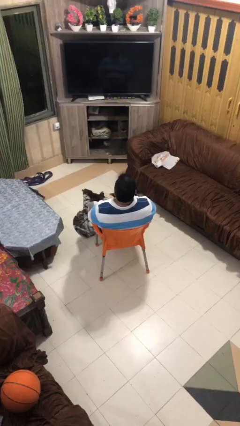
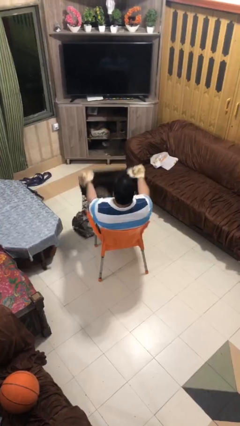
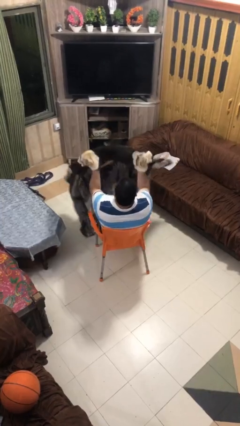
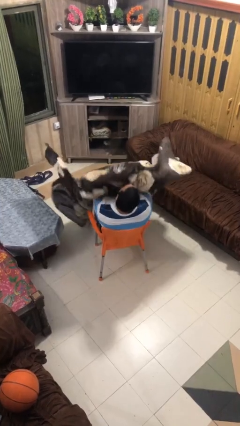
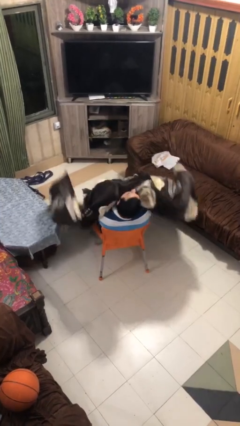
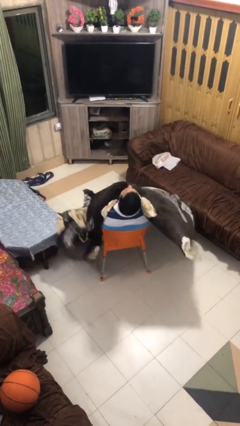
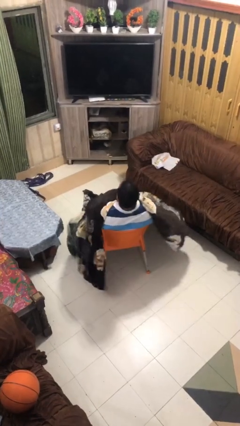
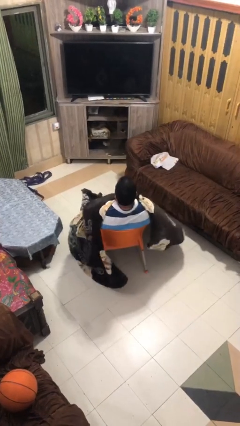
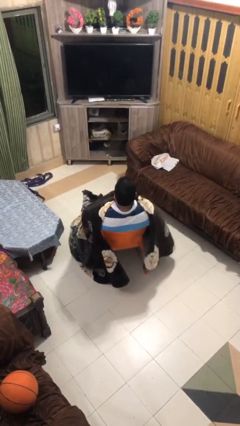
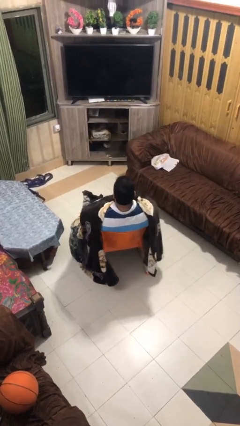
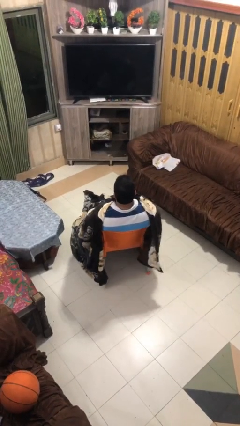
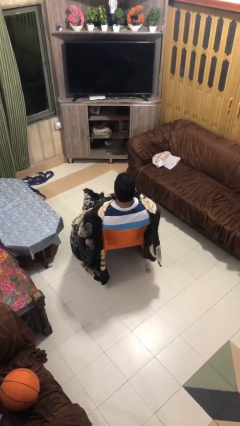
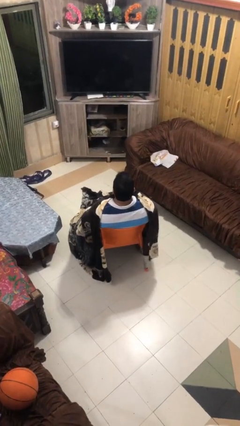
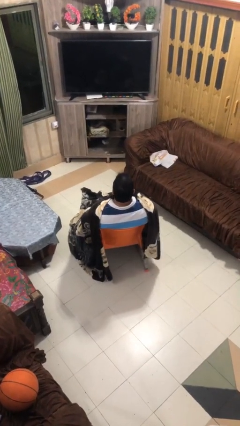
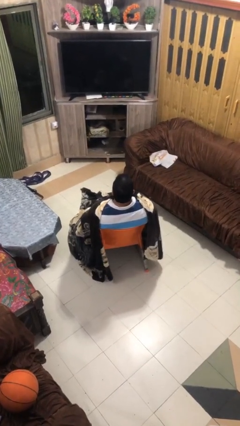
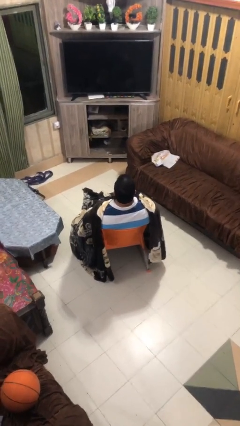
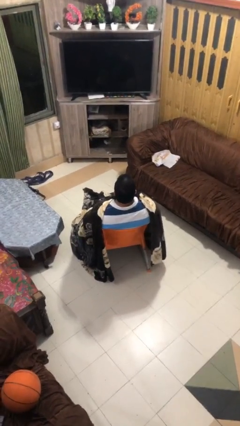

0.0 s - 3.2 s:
person covers with blanket

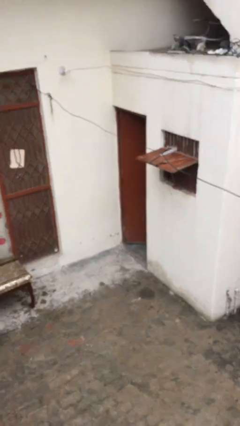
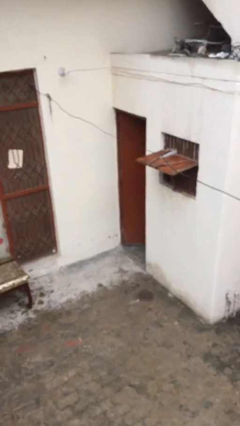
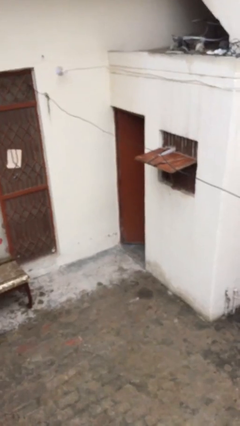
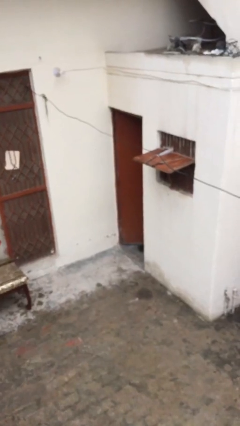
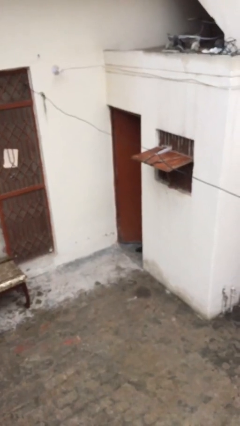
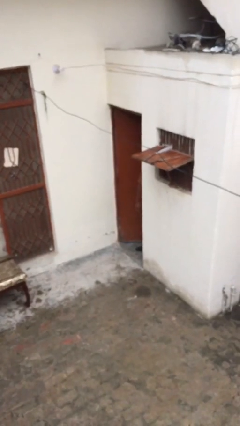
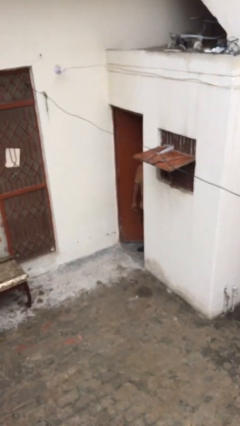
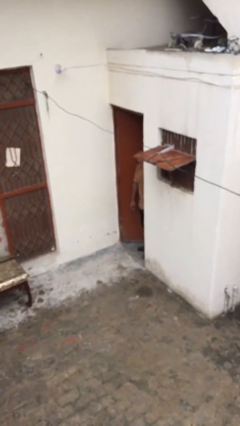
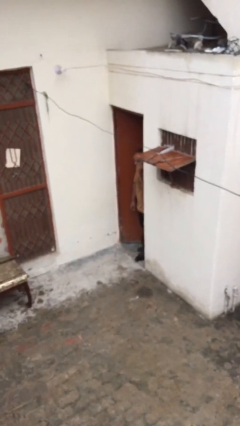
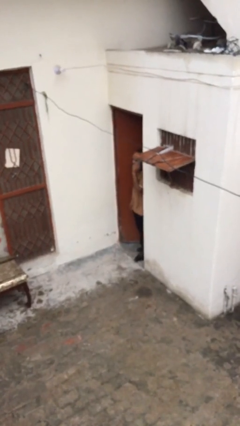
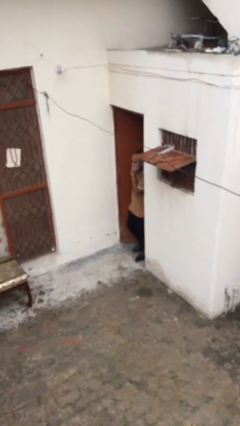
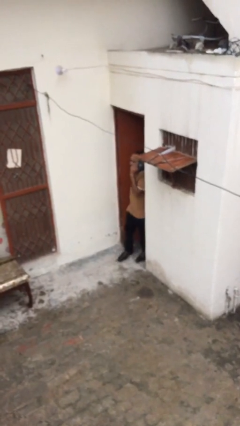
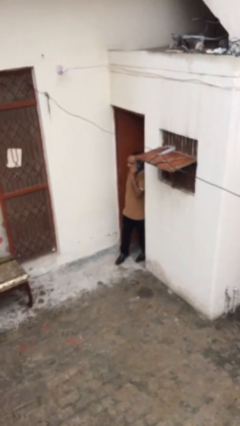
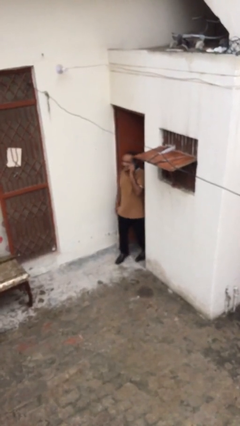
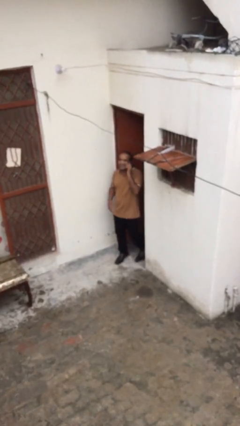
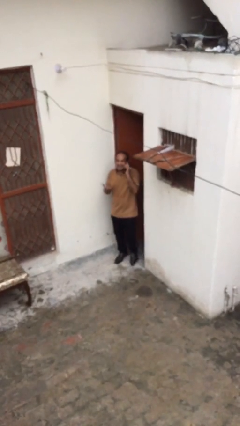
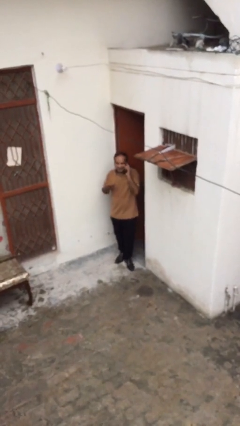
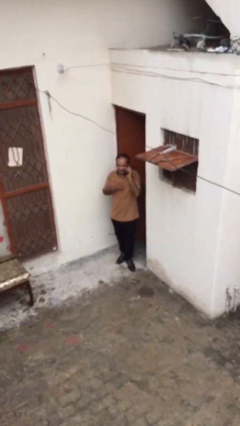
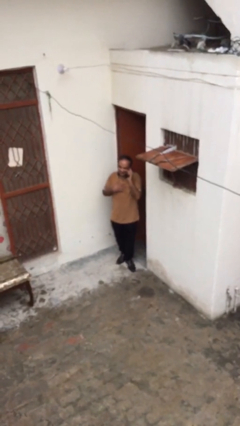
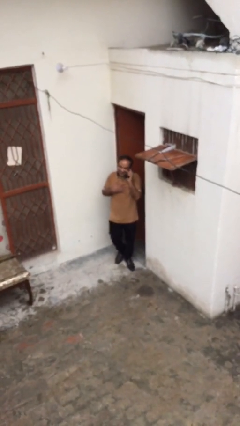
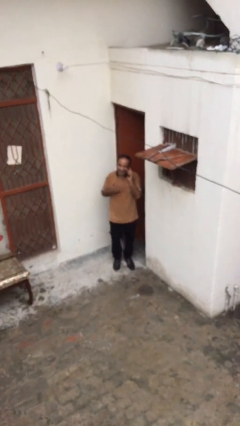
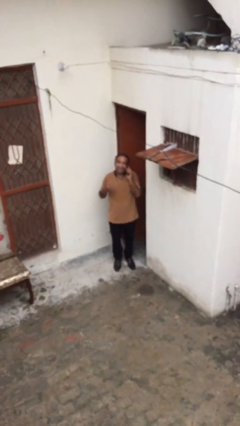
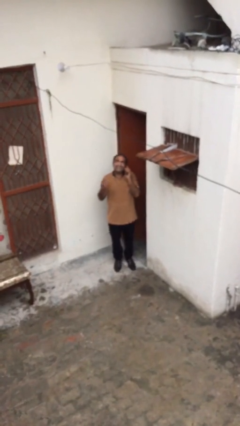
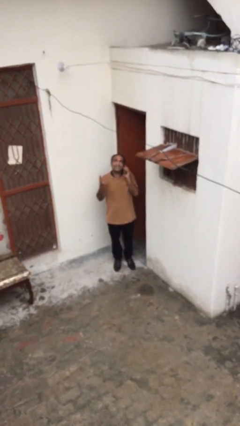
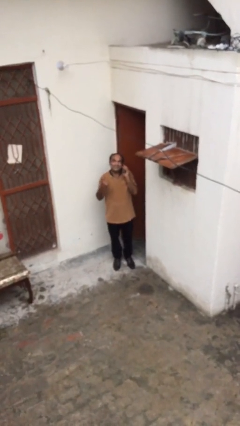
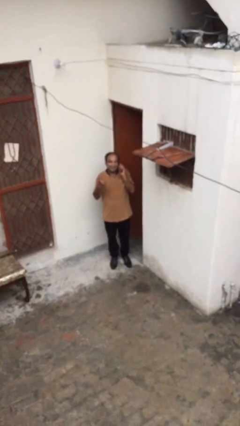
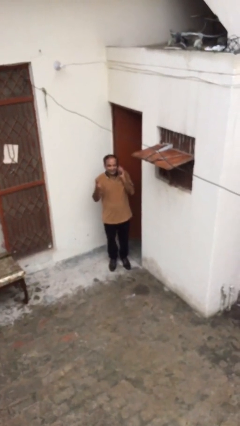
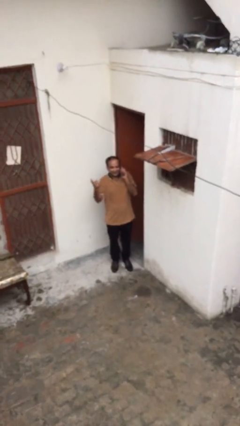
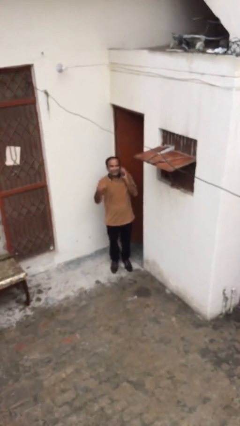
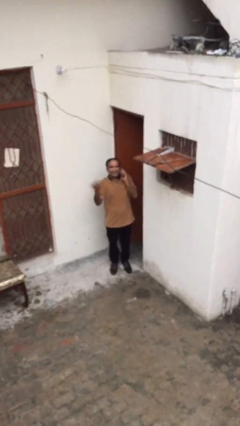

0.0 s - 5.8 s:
person enters scene through structure

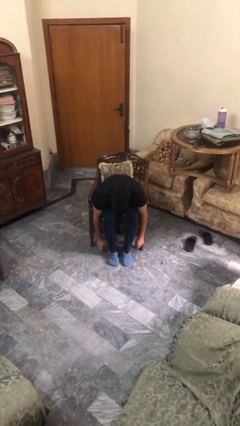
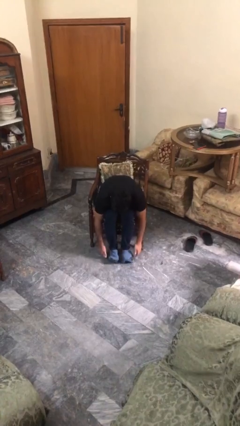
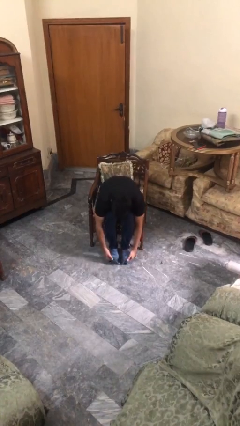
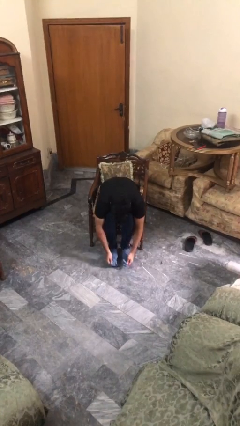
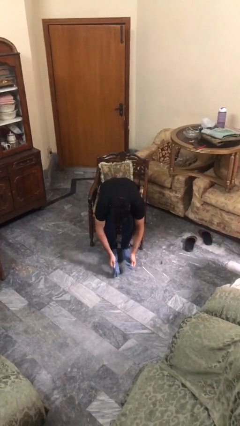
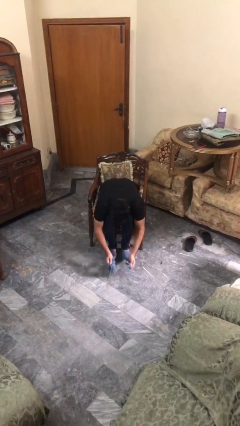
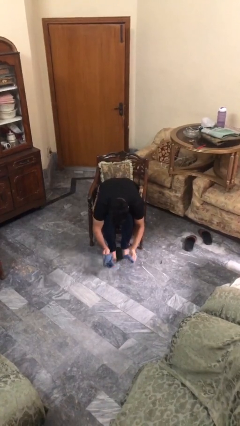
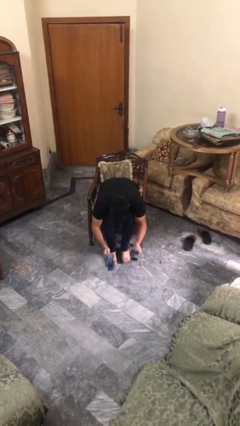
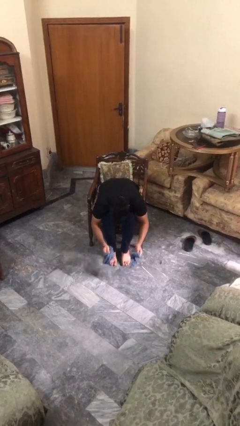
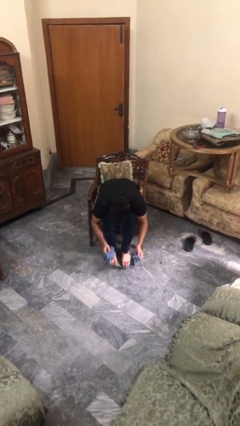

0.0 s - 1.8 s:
person takes off socks

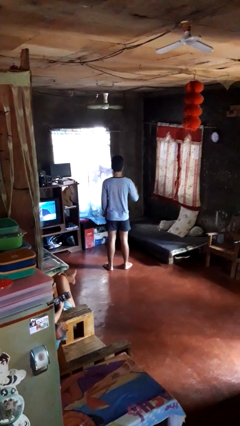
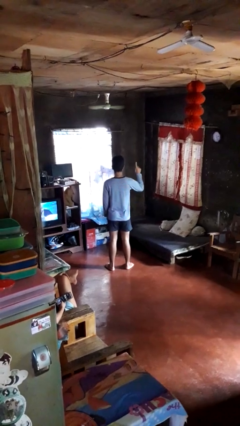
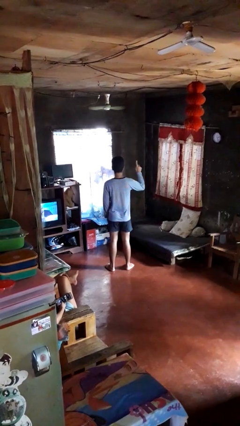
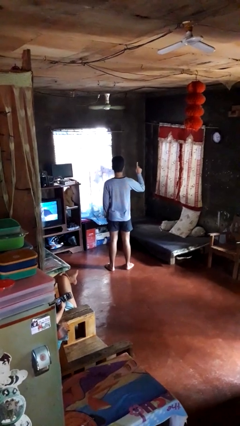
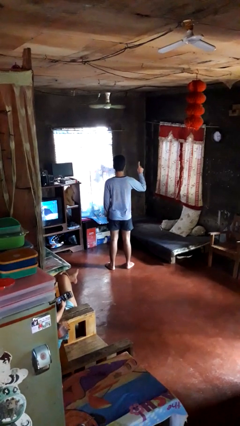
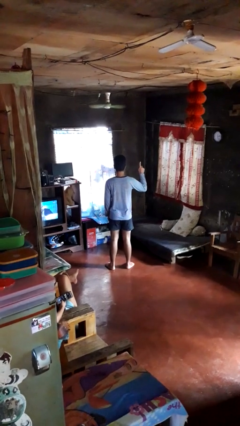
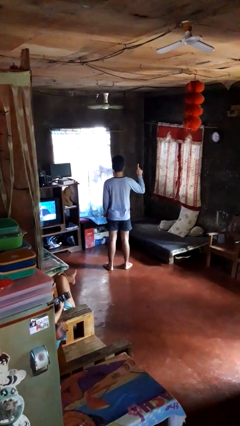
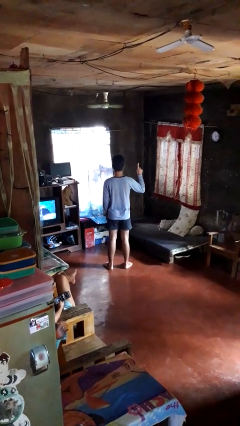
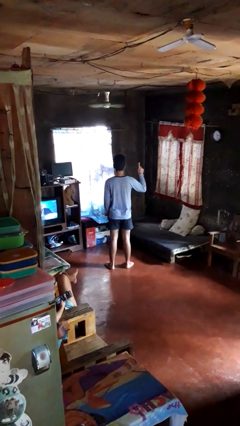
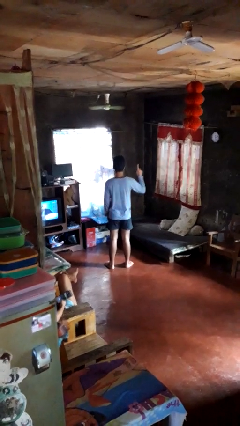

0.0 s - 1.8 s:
person gestures number one

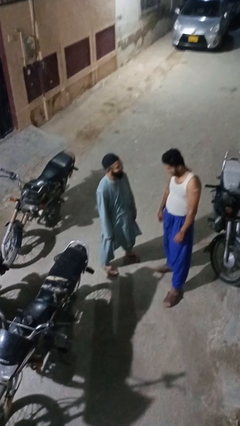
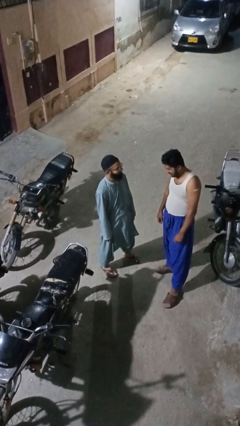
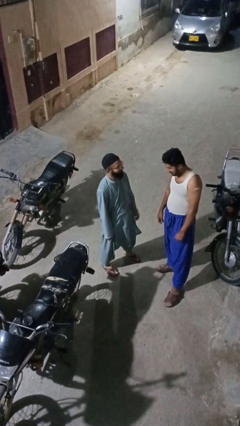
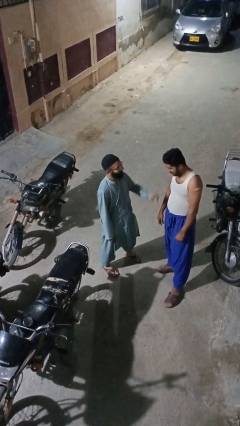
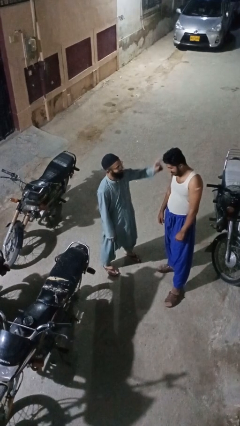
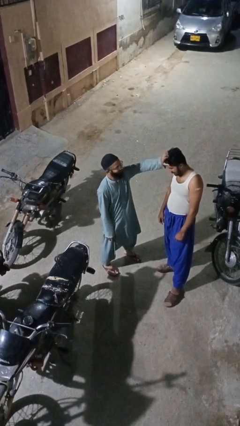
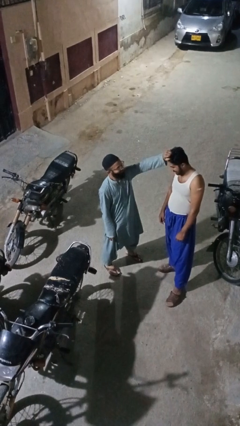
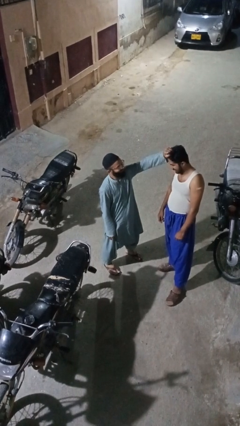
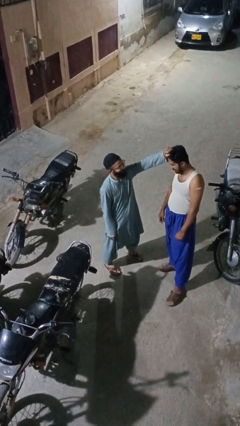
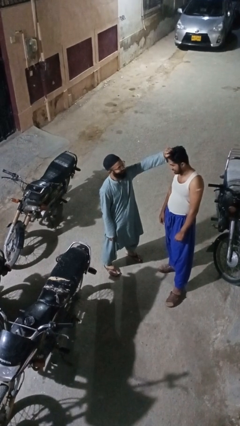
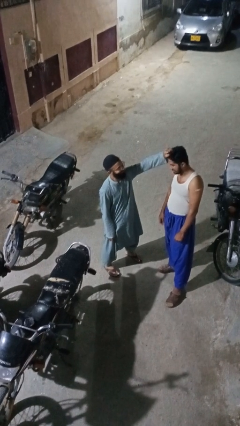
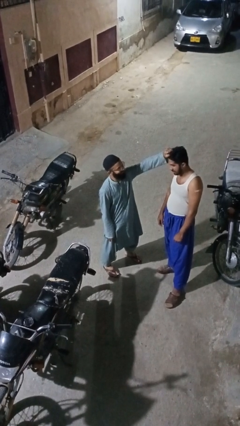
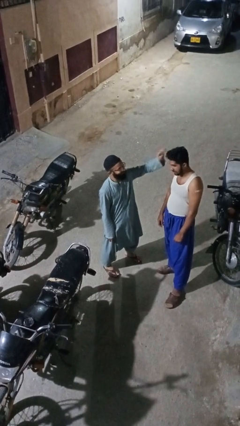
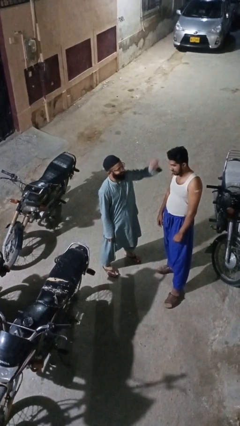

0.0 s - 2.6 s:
person grabs person by hair

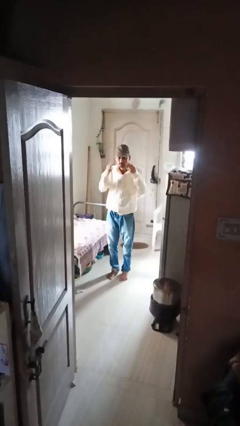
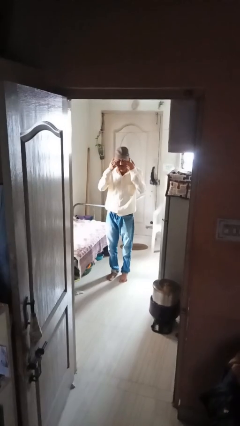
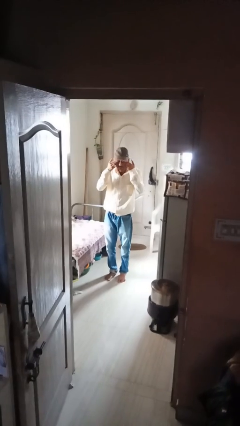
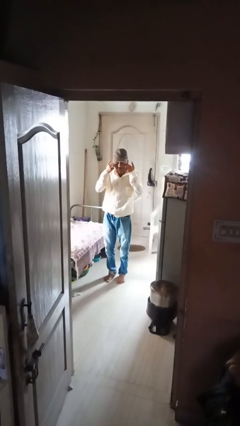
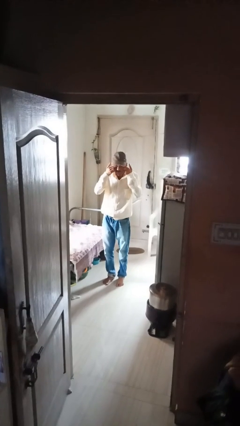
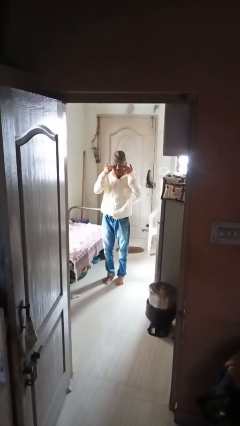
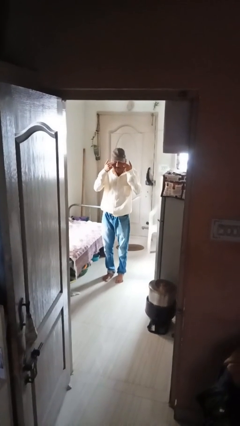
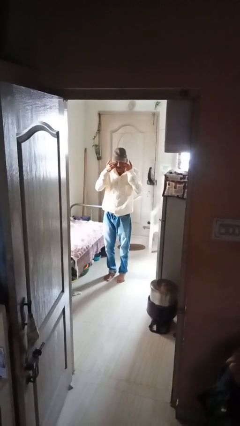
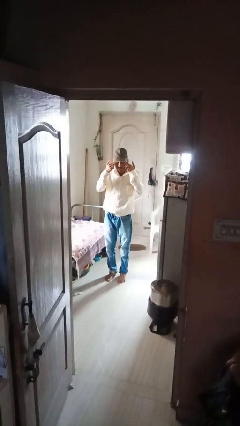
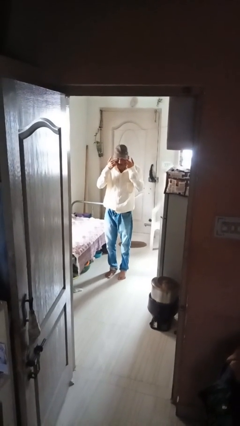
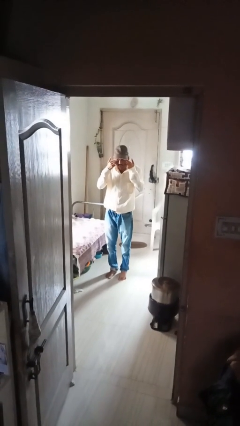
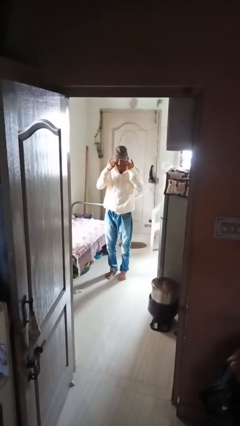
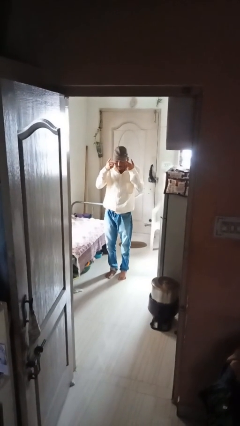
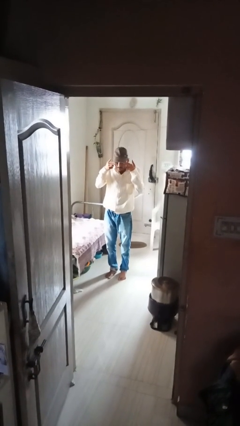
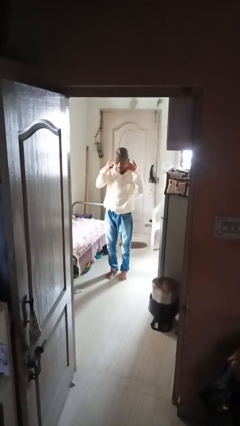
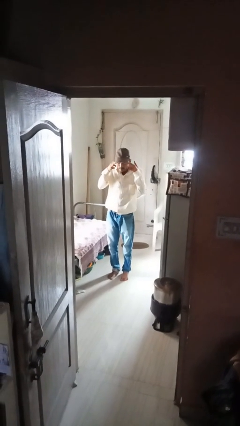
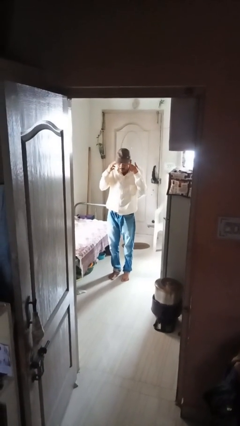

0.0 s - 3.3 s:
person rubs eyes
